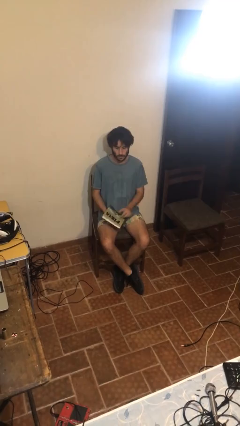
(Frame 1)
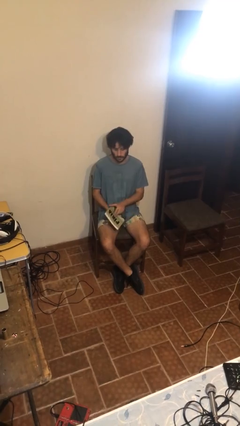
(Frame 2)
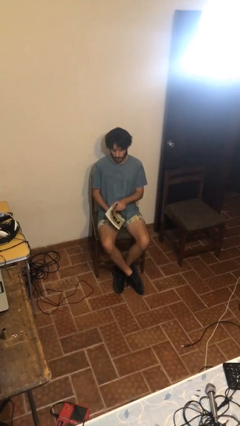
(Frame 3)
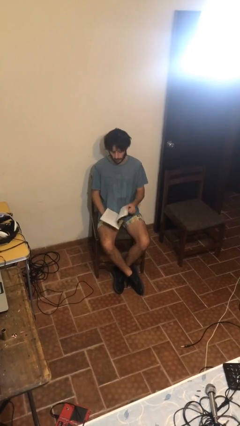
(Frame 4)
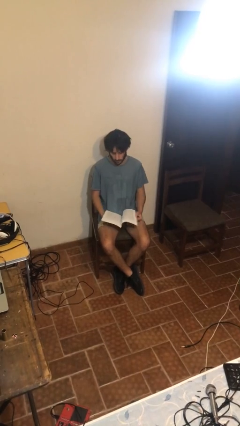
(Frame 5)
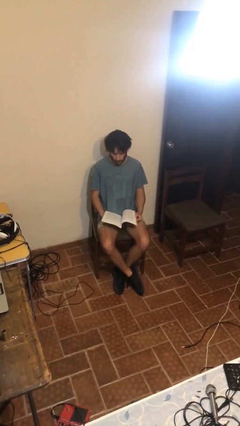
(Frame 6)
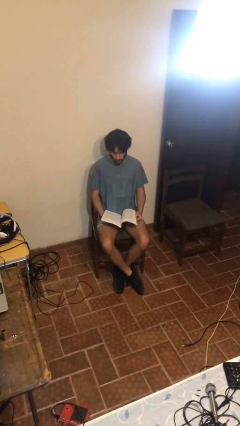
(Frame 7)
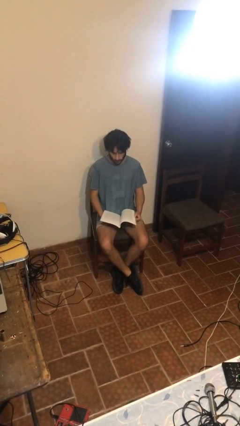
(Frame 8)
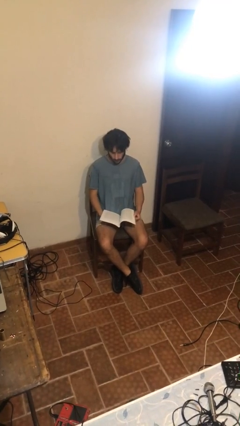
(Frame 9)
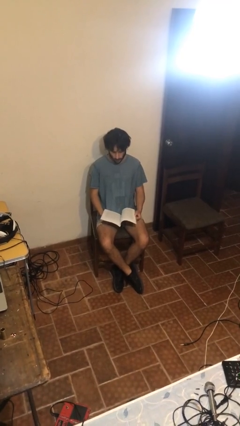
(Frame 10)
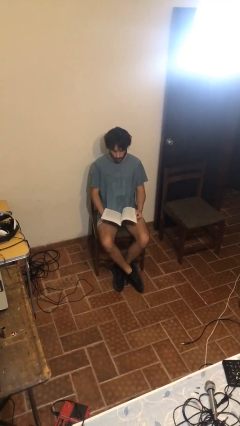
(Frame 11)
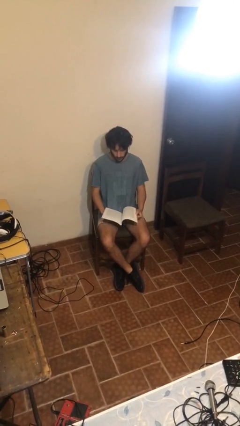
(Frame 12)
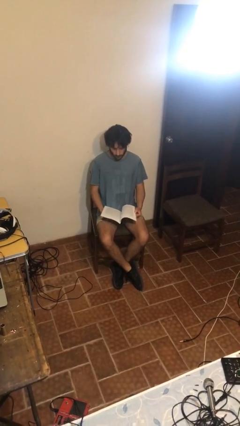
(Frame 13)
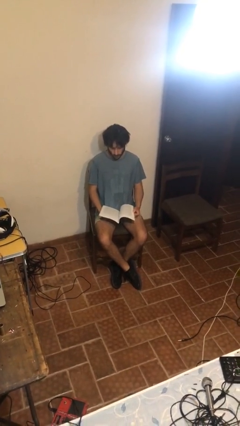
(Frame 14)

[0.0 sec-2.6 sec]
person reads document

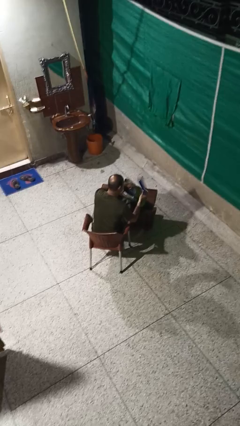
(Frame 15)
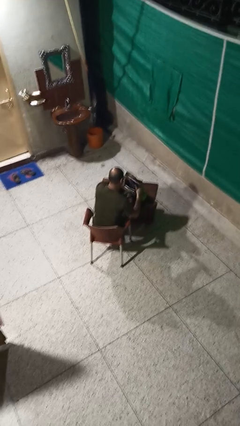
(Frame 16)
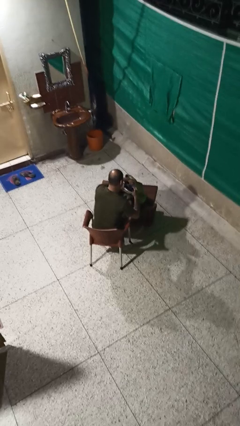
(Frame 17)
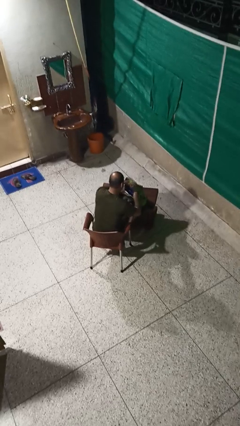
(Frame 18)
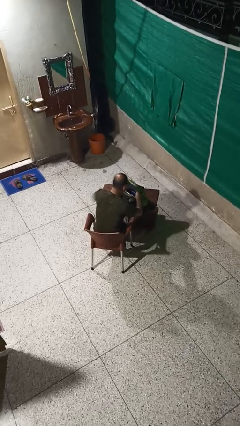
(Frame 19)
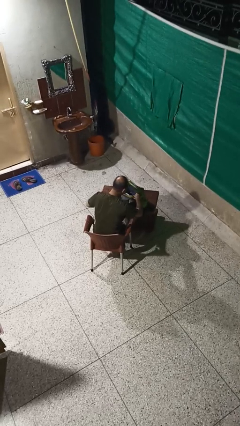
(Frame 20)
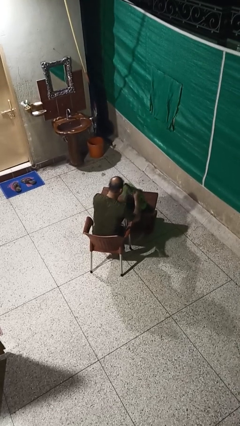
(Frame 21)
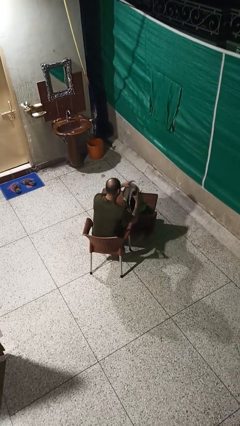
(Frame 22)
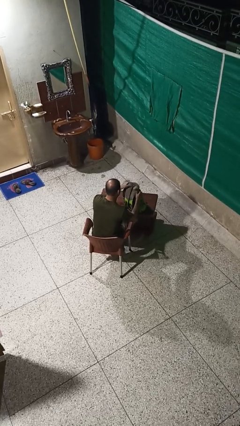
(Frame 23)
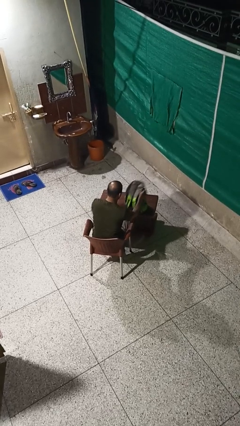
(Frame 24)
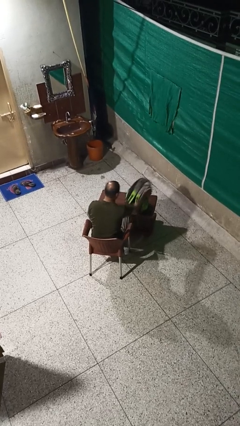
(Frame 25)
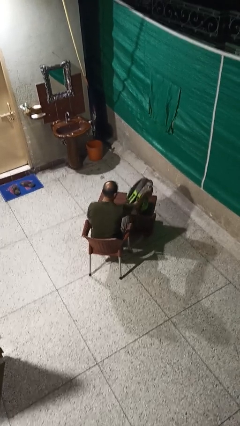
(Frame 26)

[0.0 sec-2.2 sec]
person puts object into backpack

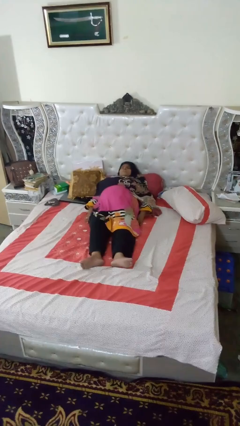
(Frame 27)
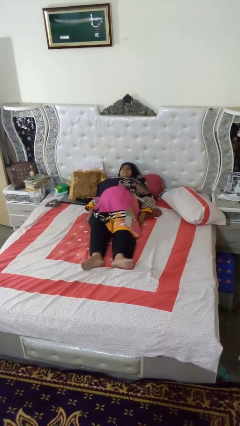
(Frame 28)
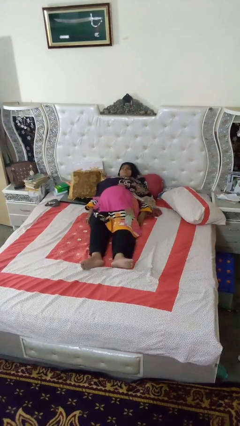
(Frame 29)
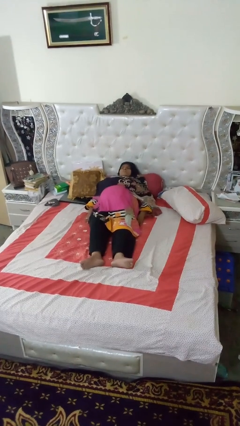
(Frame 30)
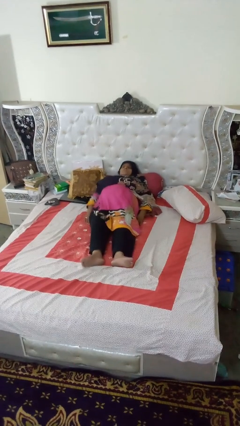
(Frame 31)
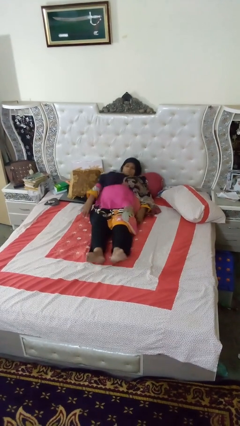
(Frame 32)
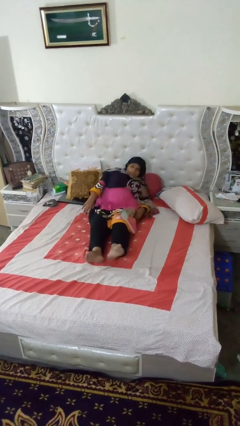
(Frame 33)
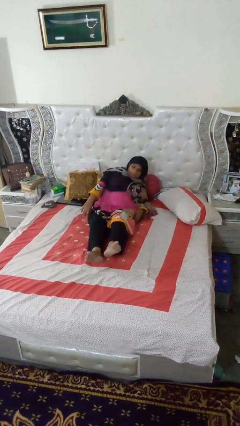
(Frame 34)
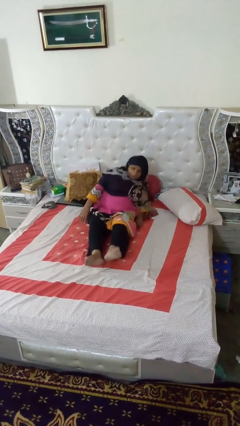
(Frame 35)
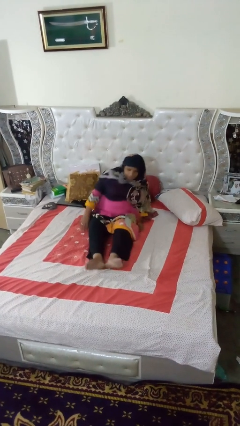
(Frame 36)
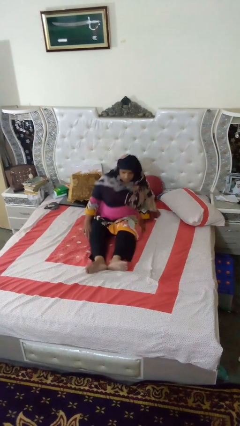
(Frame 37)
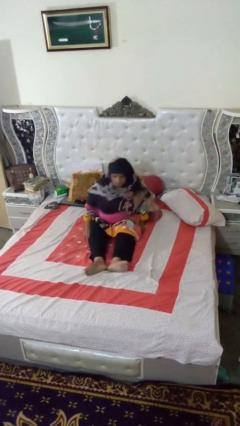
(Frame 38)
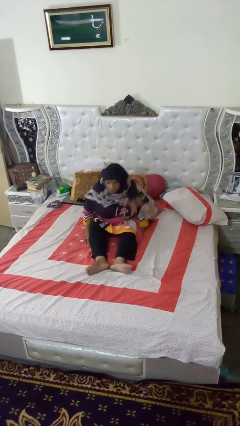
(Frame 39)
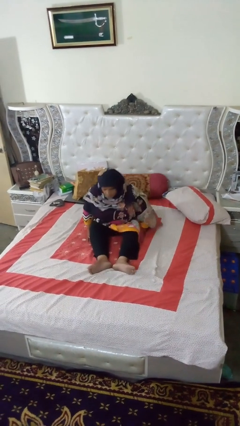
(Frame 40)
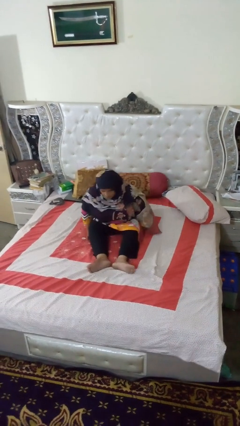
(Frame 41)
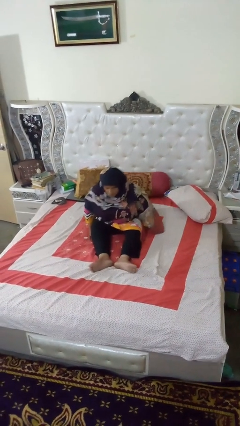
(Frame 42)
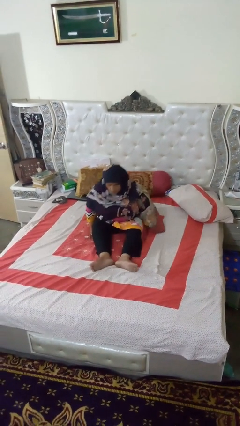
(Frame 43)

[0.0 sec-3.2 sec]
person stands up

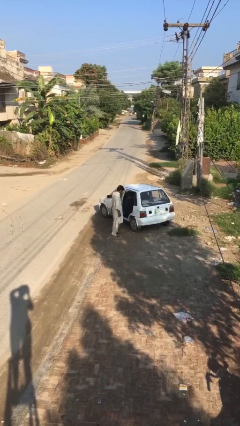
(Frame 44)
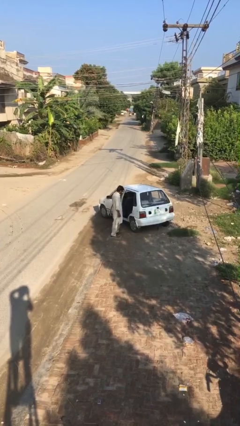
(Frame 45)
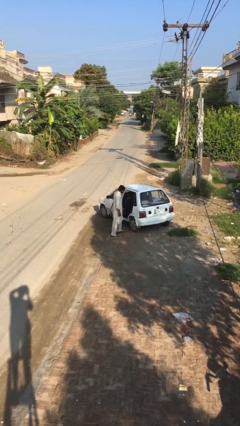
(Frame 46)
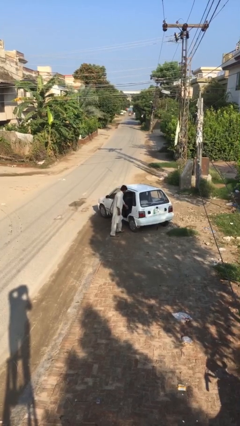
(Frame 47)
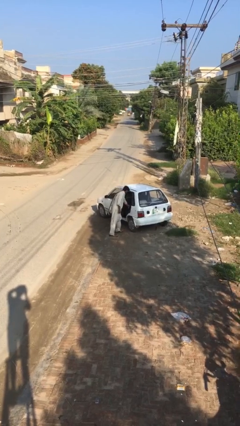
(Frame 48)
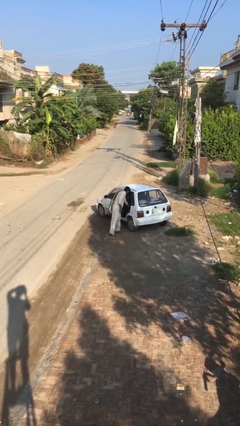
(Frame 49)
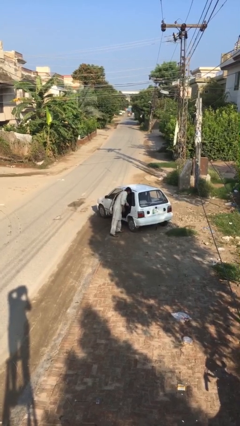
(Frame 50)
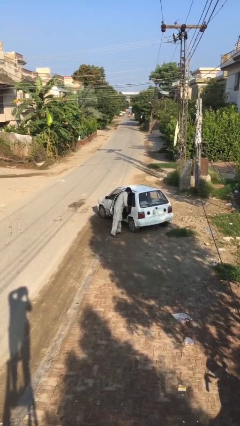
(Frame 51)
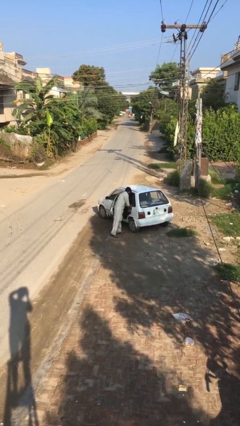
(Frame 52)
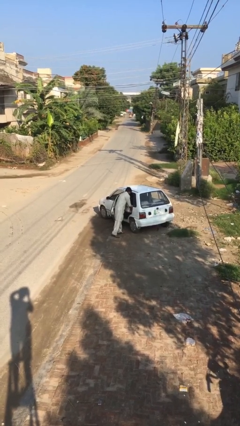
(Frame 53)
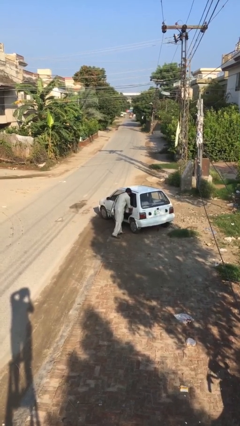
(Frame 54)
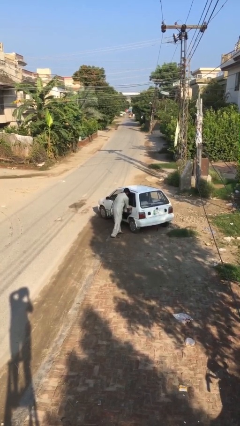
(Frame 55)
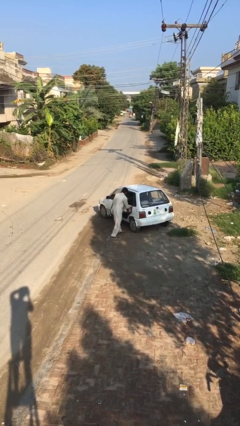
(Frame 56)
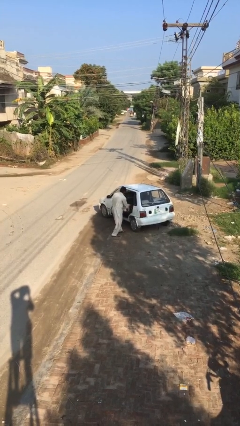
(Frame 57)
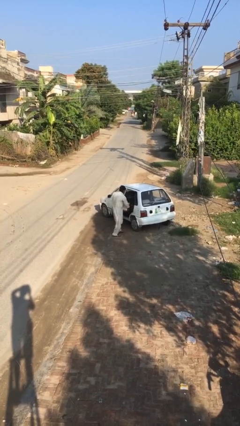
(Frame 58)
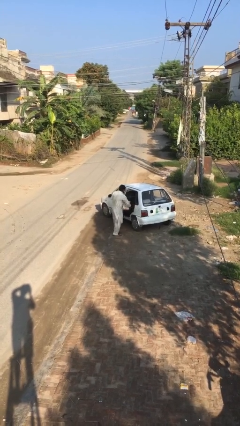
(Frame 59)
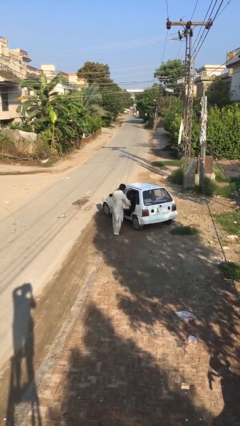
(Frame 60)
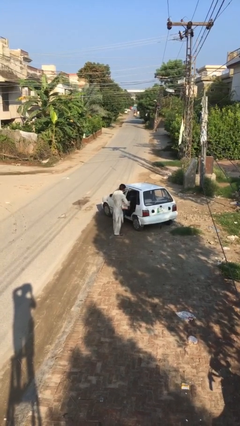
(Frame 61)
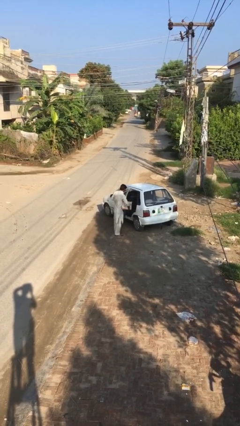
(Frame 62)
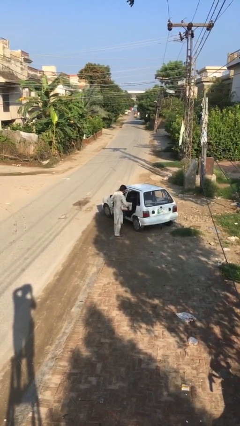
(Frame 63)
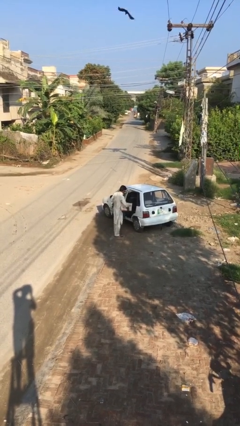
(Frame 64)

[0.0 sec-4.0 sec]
person unloads car

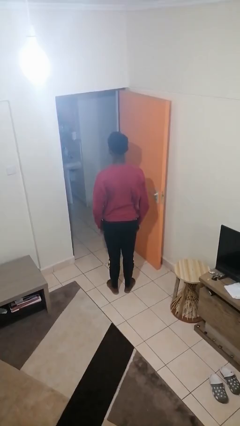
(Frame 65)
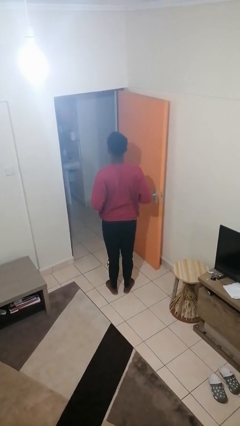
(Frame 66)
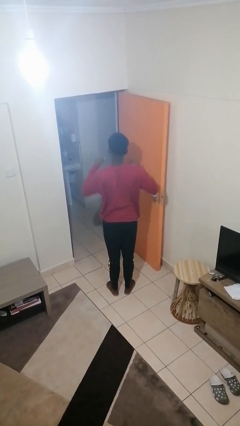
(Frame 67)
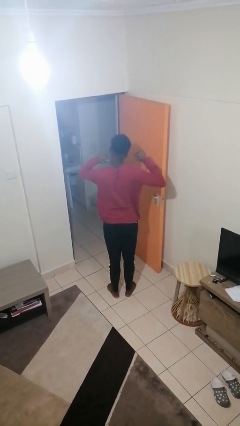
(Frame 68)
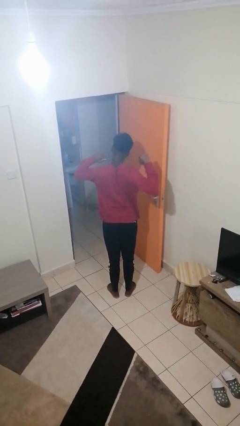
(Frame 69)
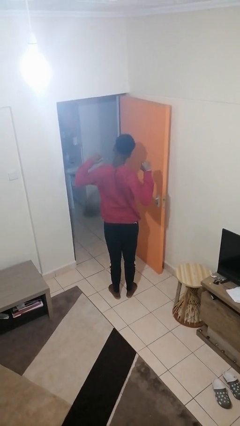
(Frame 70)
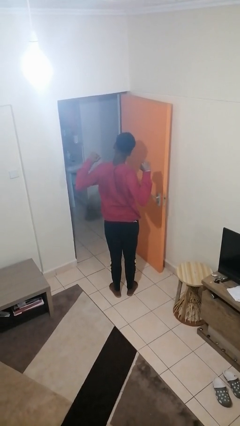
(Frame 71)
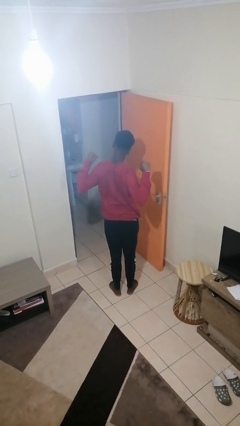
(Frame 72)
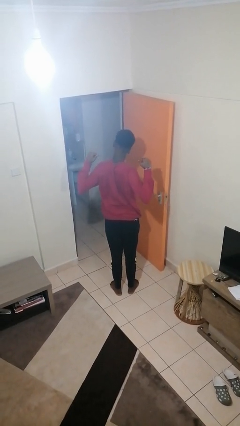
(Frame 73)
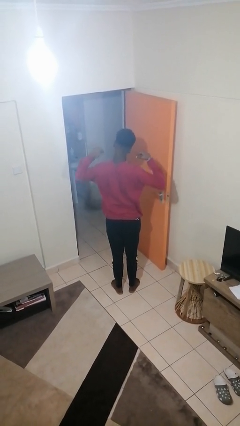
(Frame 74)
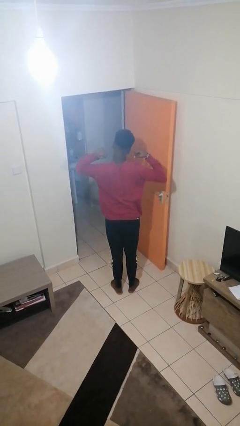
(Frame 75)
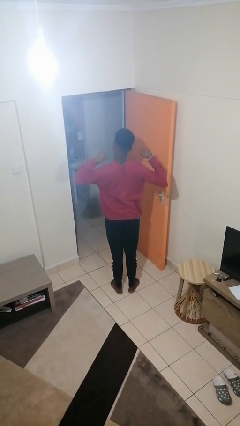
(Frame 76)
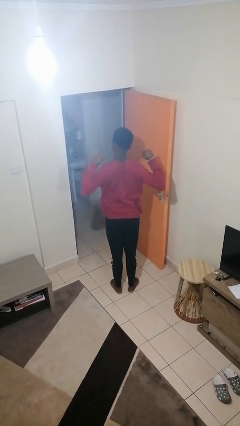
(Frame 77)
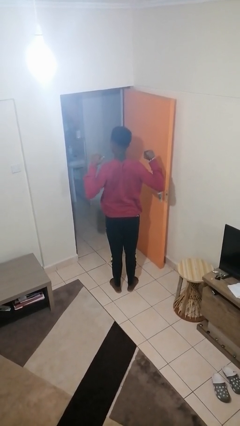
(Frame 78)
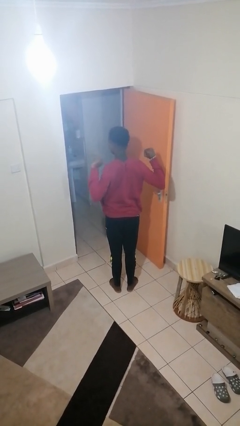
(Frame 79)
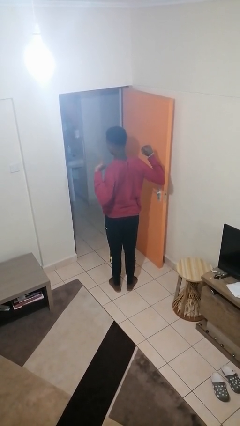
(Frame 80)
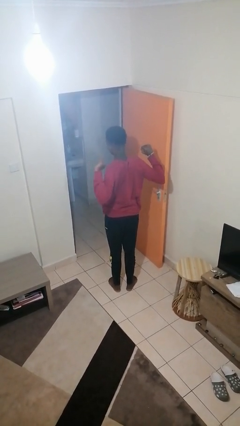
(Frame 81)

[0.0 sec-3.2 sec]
person stretches arms to side

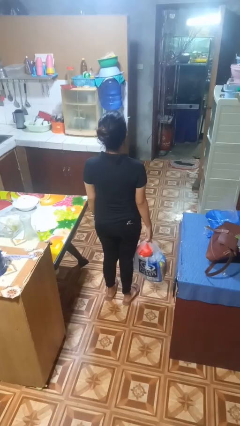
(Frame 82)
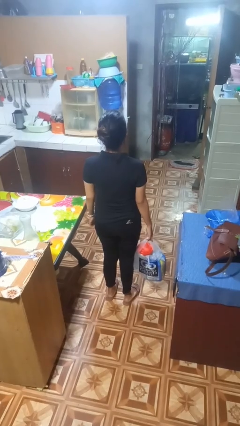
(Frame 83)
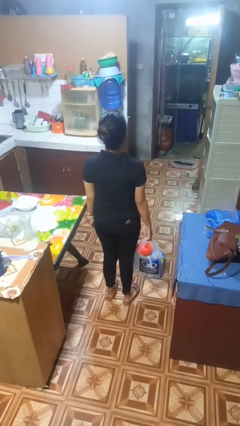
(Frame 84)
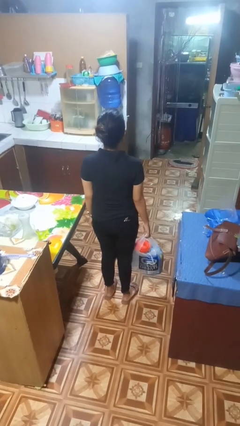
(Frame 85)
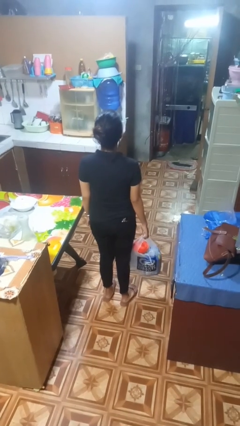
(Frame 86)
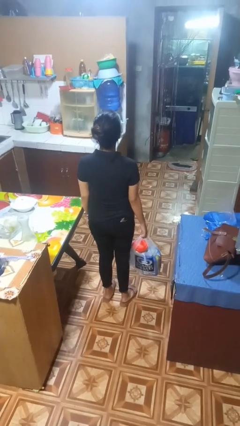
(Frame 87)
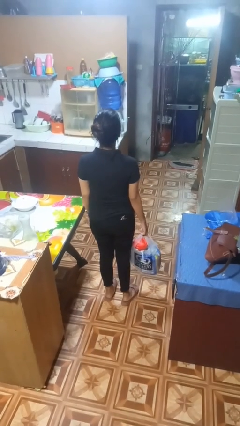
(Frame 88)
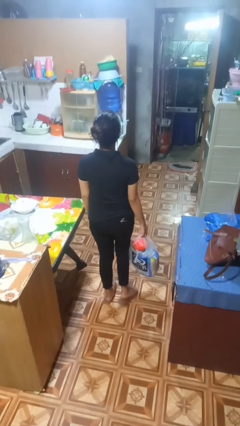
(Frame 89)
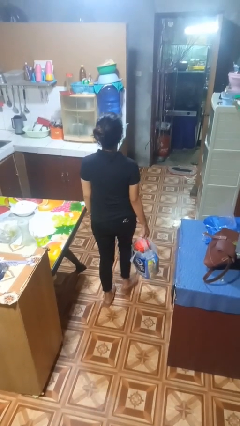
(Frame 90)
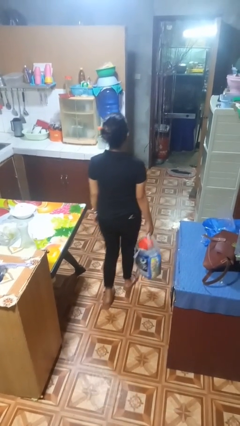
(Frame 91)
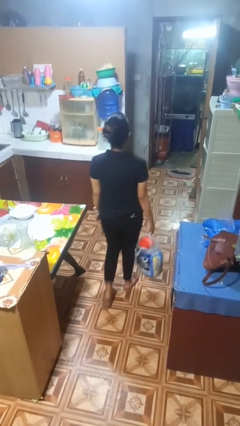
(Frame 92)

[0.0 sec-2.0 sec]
person carries groceries
